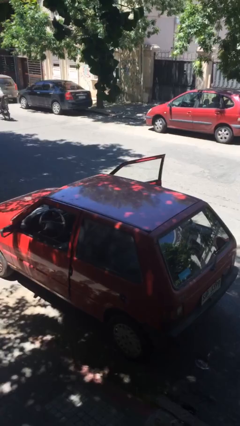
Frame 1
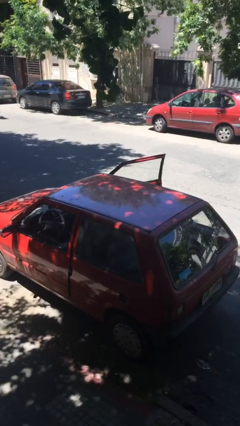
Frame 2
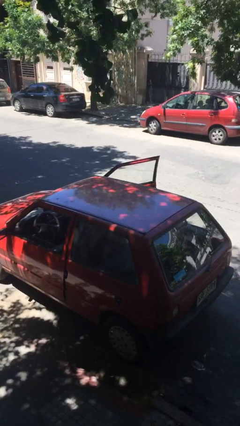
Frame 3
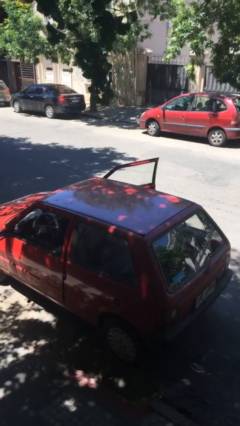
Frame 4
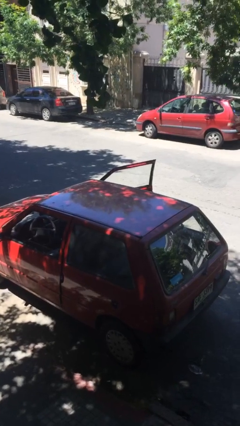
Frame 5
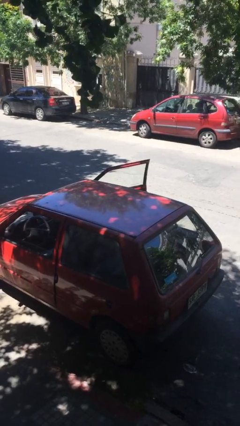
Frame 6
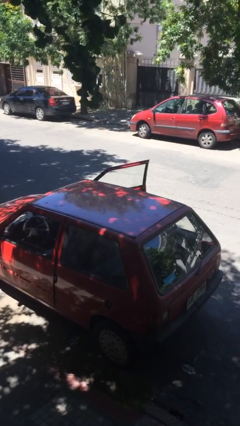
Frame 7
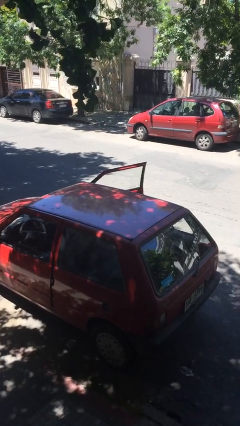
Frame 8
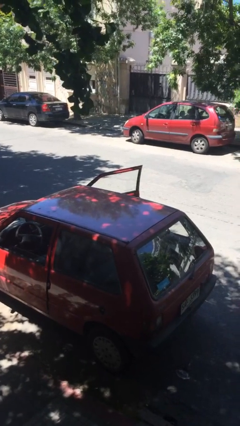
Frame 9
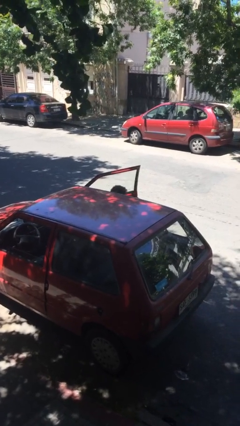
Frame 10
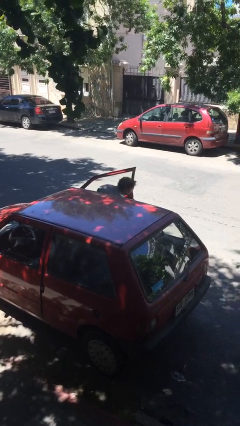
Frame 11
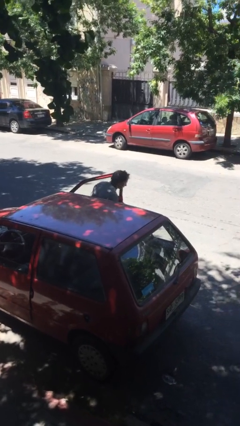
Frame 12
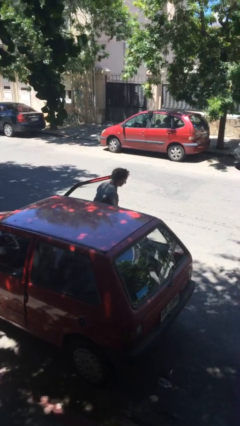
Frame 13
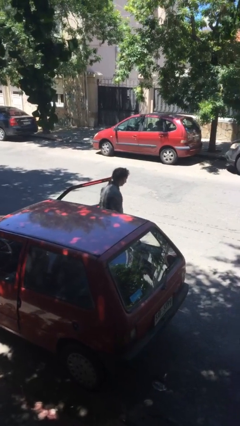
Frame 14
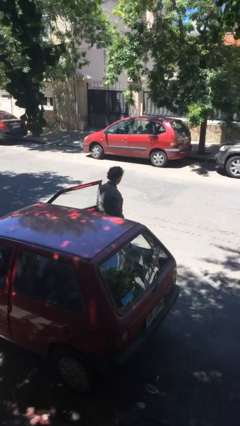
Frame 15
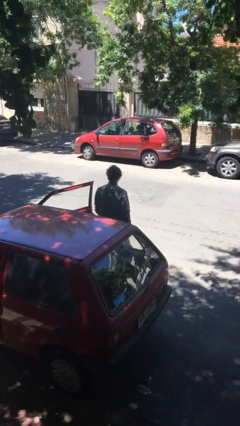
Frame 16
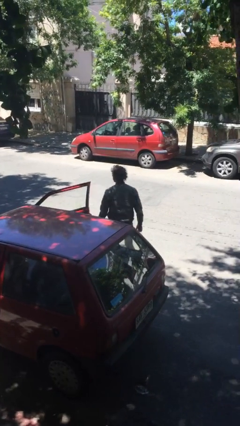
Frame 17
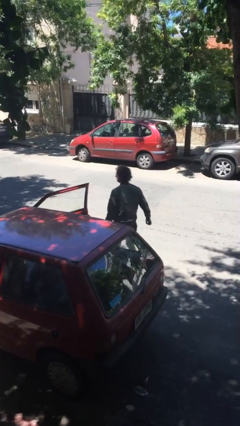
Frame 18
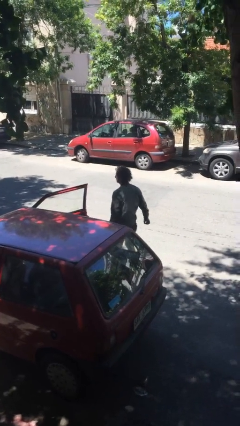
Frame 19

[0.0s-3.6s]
person exits car

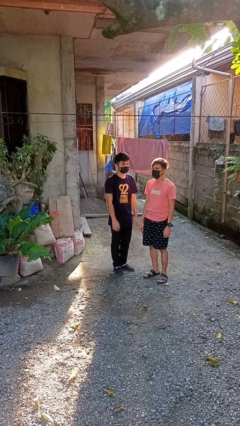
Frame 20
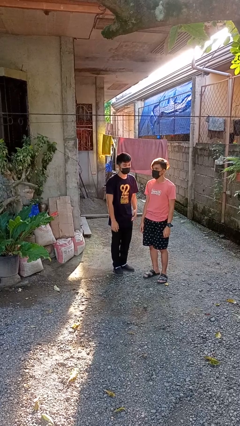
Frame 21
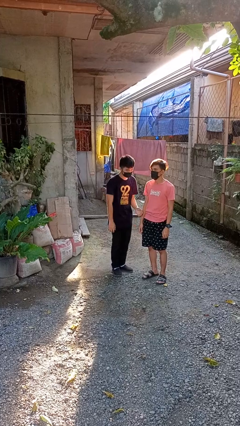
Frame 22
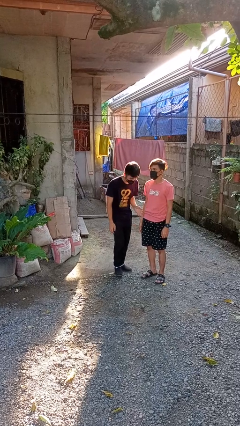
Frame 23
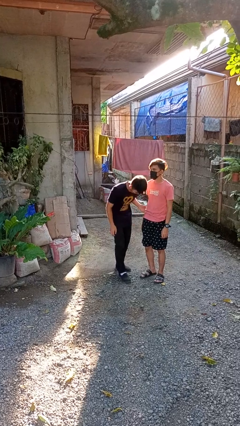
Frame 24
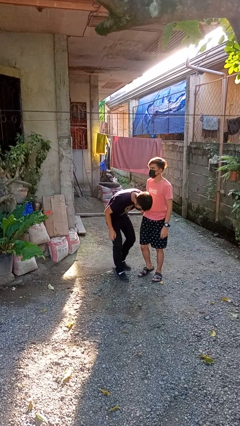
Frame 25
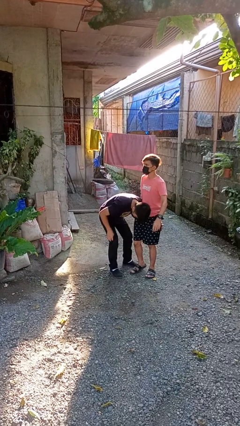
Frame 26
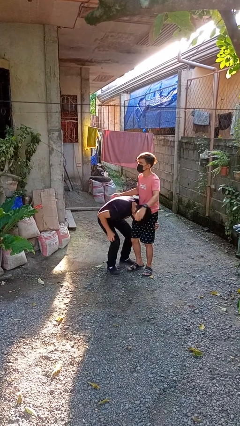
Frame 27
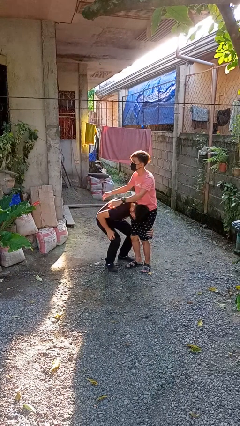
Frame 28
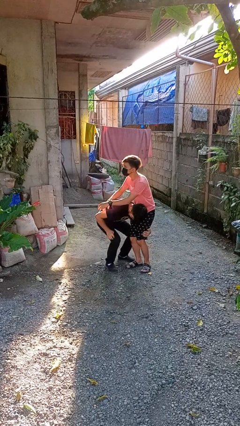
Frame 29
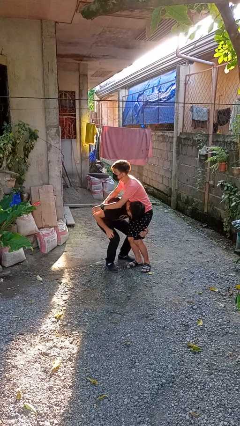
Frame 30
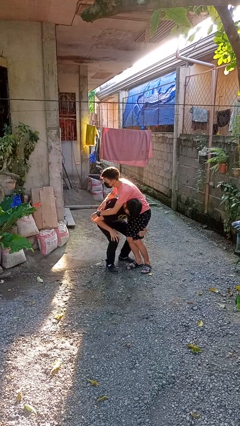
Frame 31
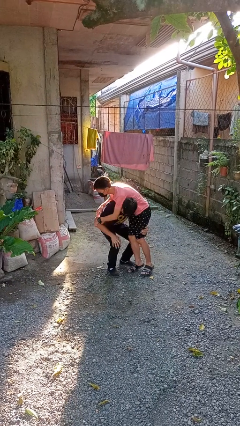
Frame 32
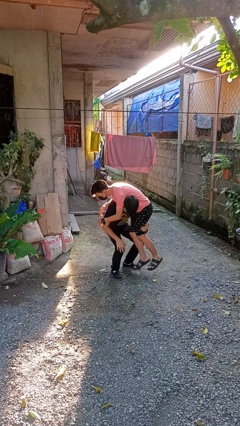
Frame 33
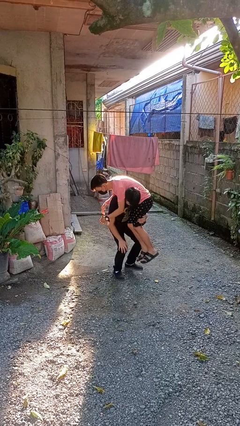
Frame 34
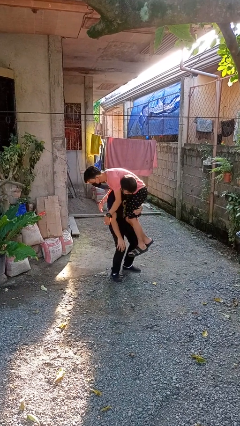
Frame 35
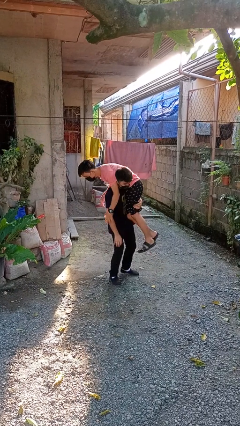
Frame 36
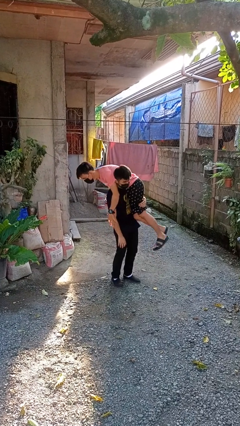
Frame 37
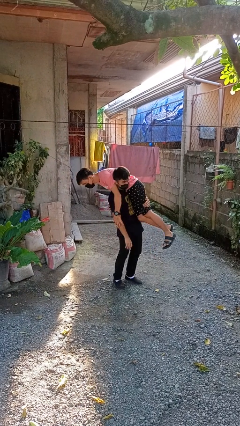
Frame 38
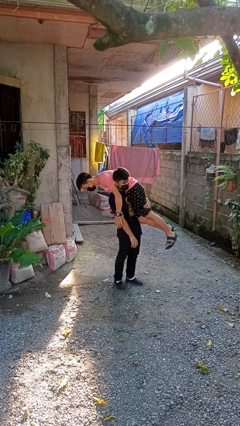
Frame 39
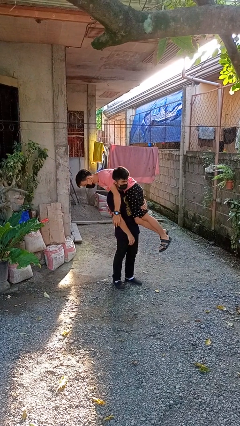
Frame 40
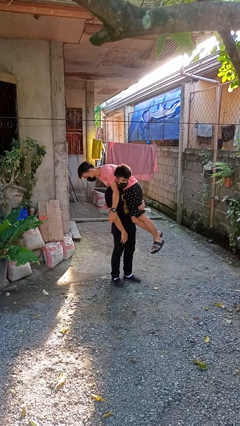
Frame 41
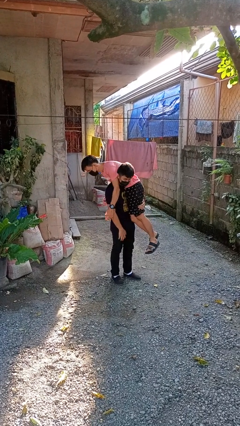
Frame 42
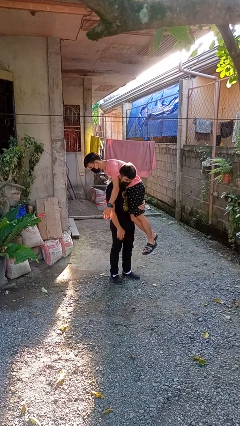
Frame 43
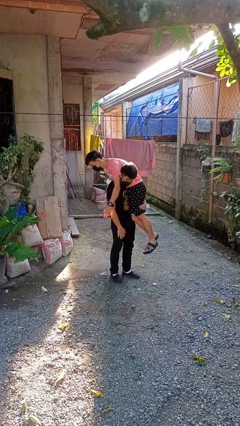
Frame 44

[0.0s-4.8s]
person carries person over shoulder

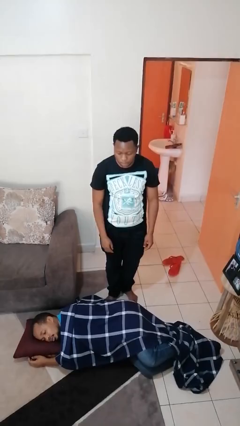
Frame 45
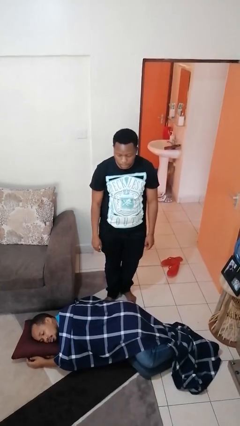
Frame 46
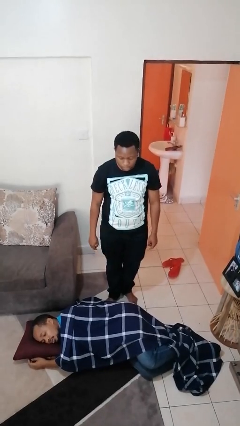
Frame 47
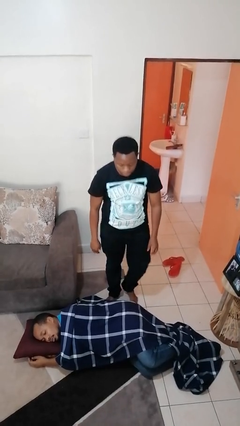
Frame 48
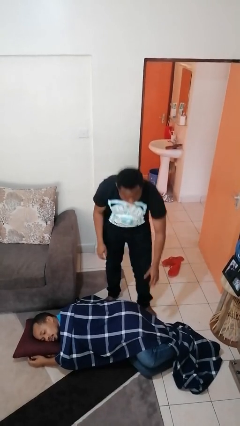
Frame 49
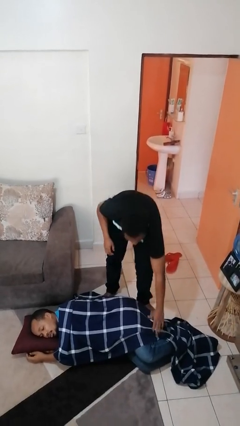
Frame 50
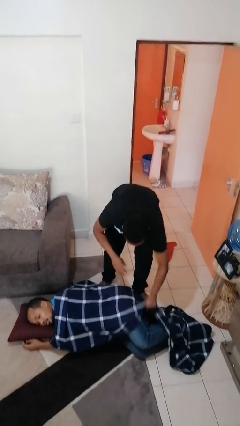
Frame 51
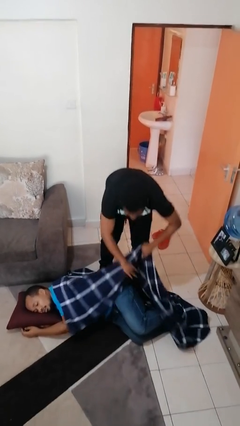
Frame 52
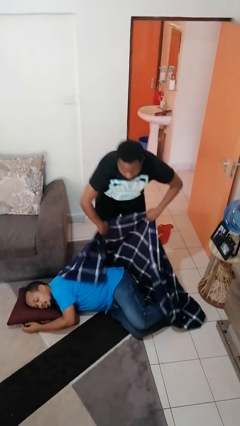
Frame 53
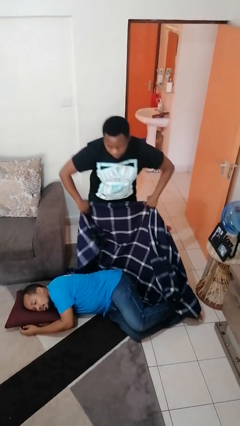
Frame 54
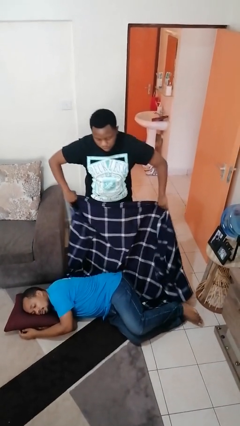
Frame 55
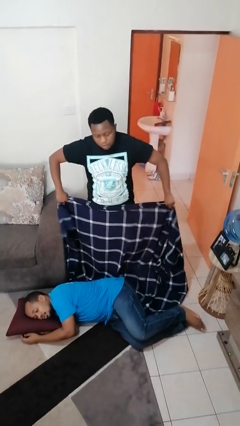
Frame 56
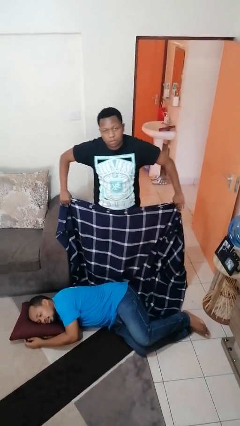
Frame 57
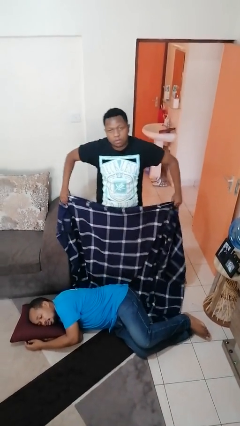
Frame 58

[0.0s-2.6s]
person uncovers friend with blanket

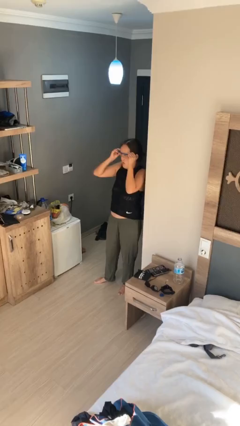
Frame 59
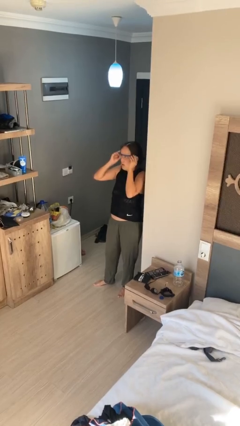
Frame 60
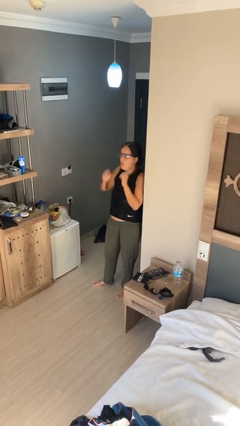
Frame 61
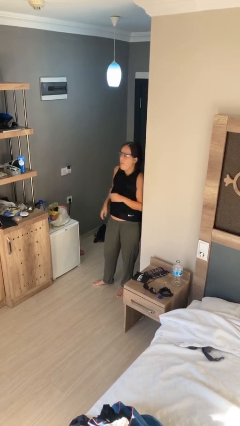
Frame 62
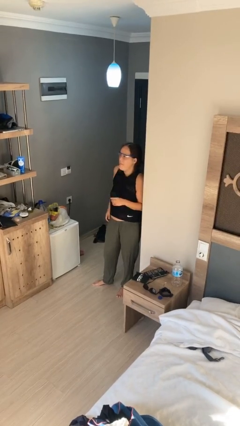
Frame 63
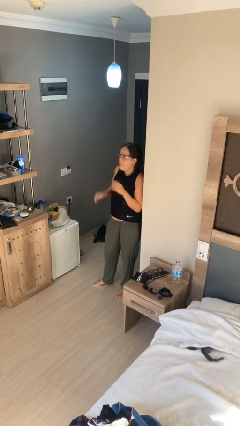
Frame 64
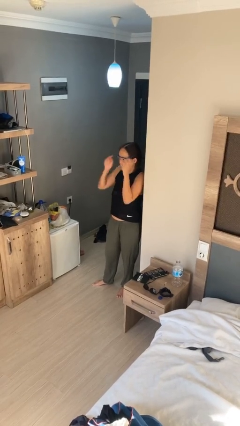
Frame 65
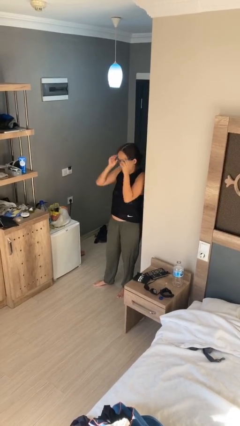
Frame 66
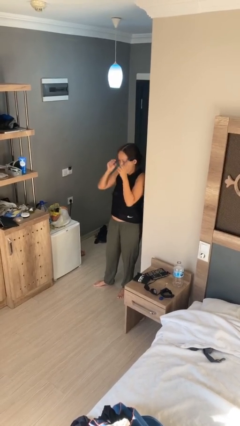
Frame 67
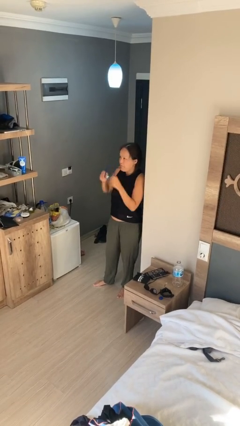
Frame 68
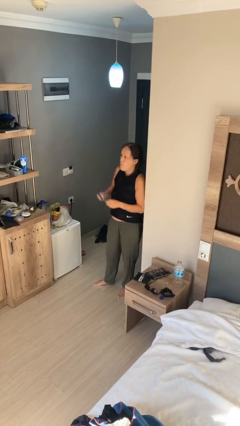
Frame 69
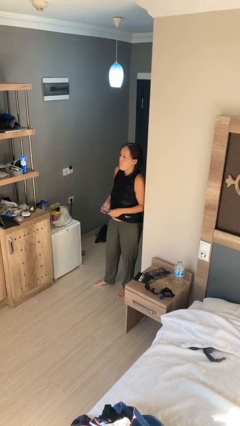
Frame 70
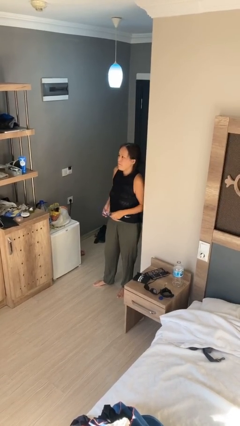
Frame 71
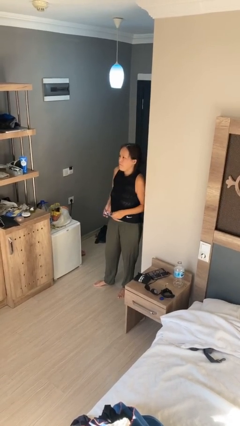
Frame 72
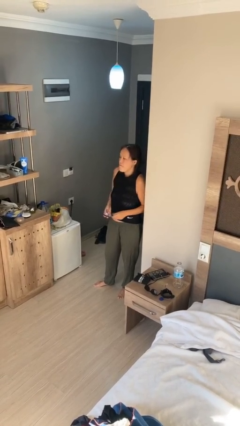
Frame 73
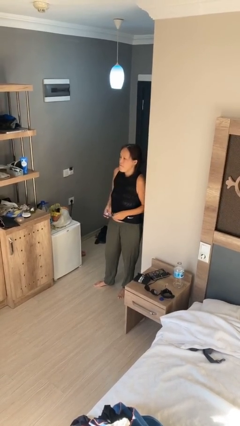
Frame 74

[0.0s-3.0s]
person takes off glasses

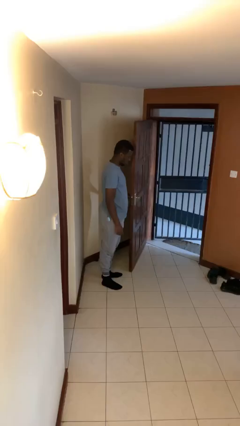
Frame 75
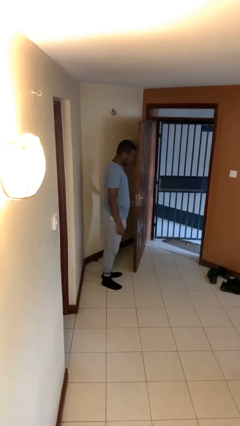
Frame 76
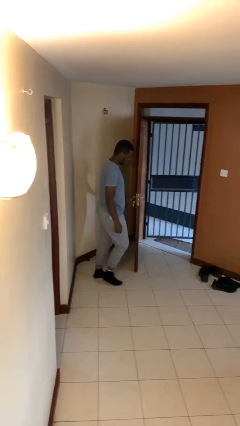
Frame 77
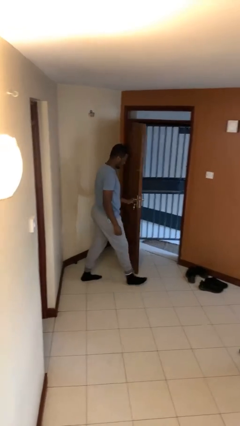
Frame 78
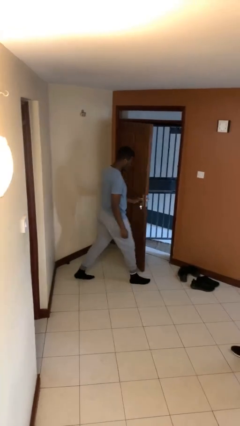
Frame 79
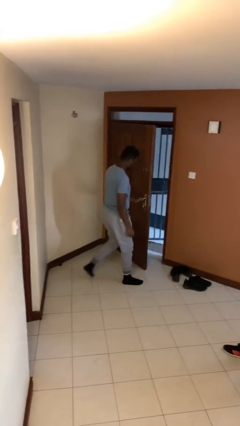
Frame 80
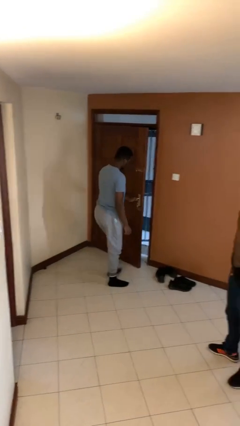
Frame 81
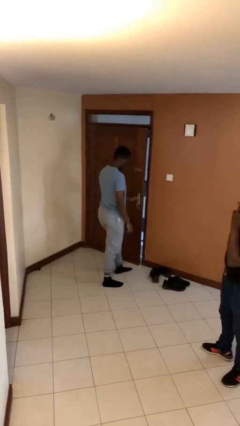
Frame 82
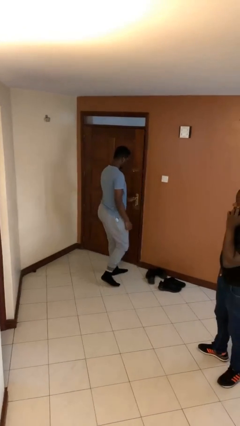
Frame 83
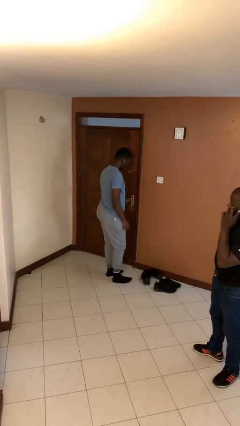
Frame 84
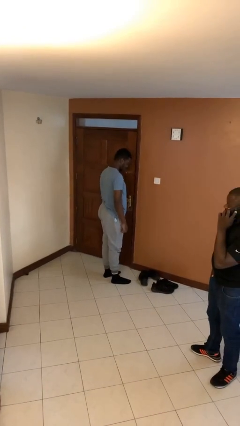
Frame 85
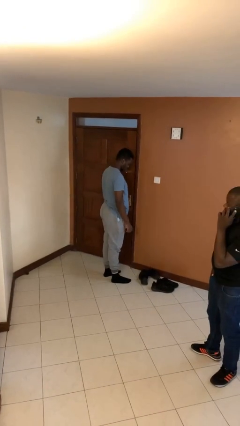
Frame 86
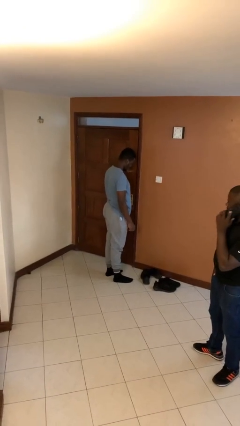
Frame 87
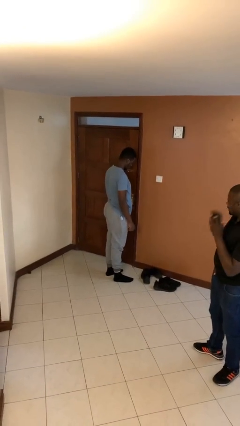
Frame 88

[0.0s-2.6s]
person closes facility door

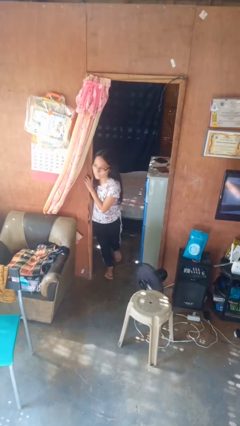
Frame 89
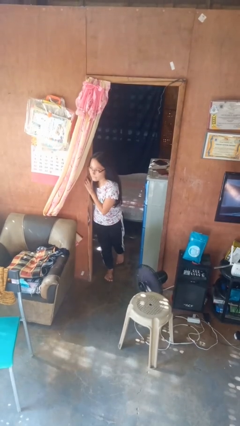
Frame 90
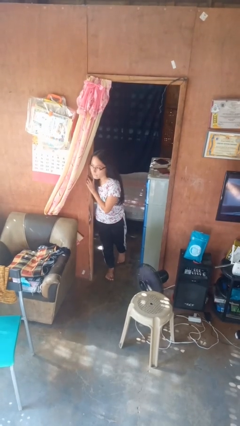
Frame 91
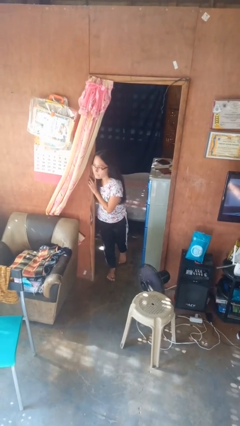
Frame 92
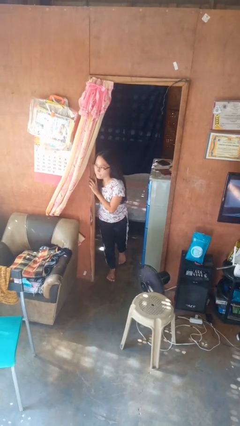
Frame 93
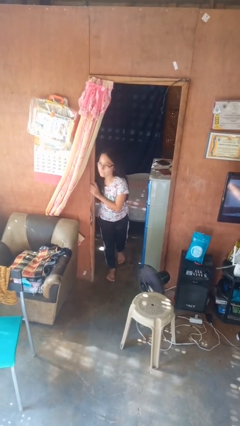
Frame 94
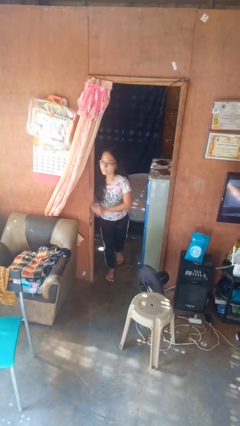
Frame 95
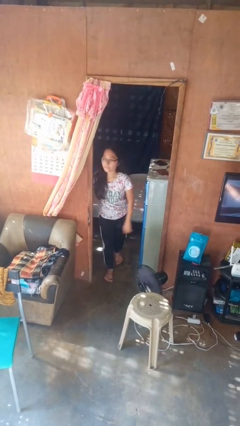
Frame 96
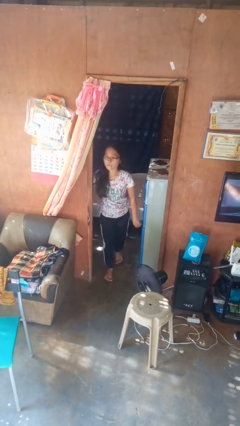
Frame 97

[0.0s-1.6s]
person bumps into wall
